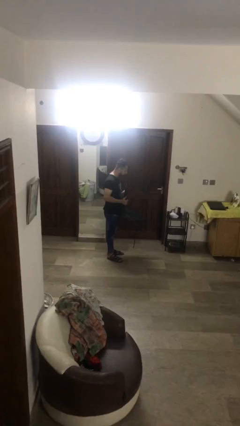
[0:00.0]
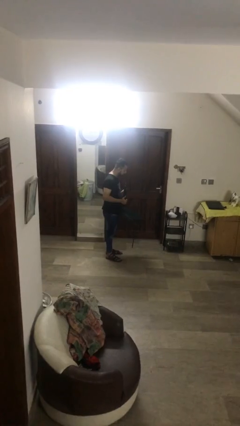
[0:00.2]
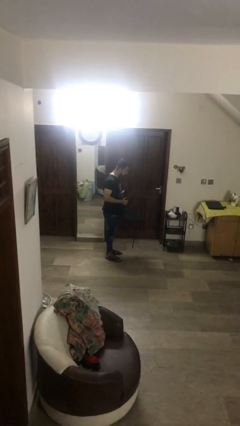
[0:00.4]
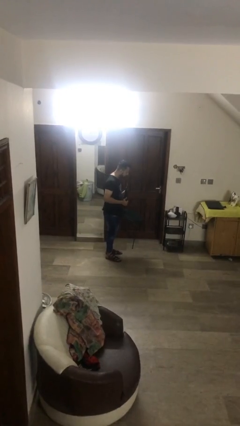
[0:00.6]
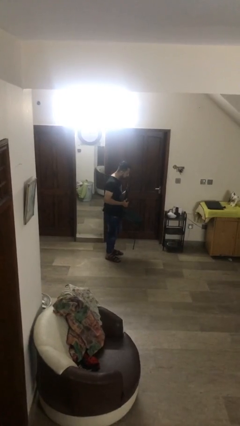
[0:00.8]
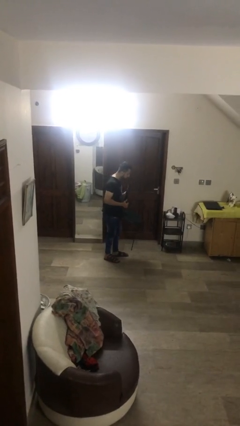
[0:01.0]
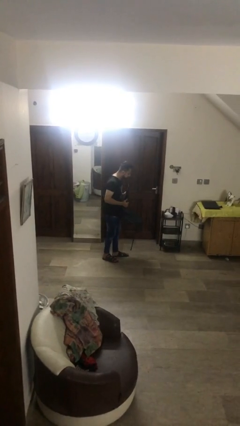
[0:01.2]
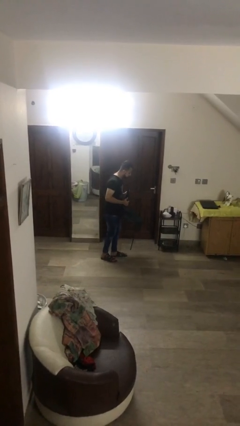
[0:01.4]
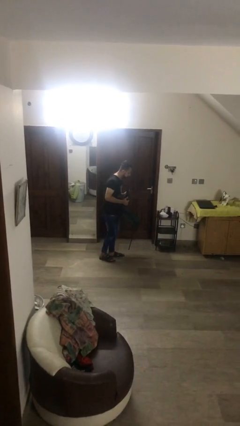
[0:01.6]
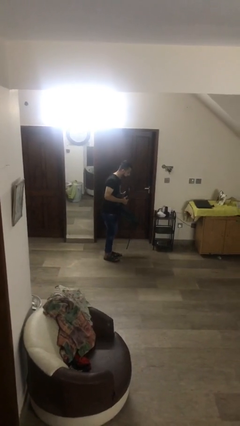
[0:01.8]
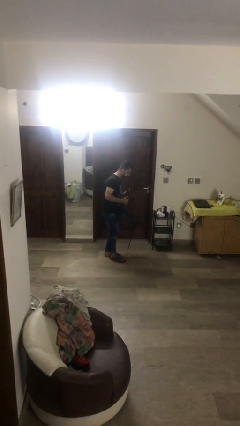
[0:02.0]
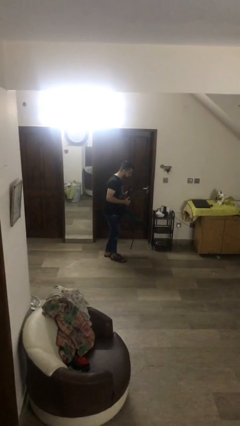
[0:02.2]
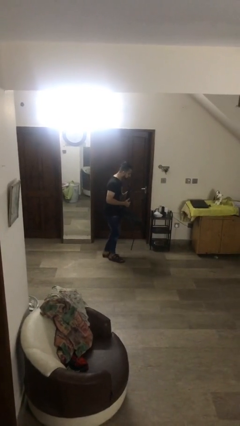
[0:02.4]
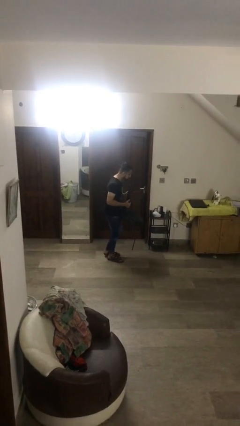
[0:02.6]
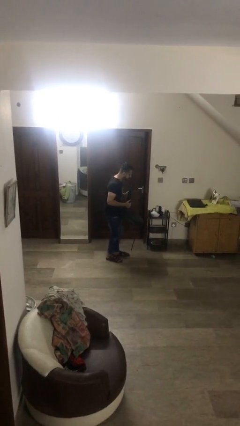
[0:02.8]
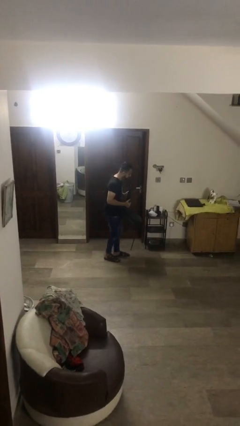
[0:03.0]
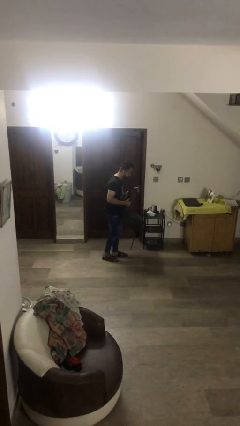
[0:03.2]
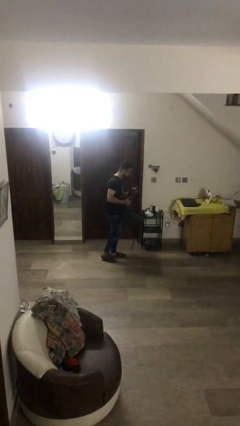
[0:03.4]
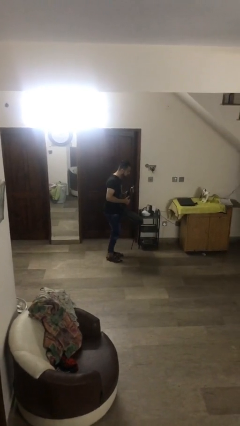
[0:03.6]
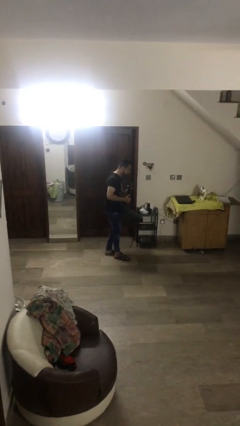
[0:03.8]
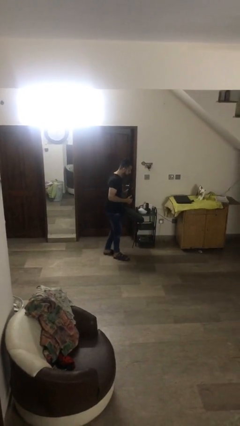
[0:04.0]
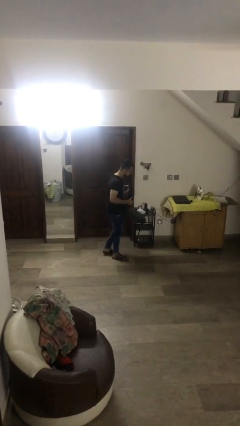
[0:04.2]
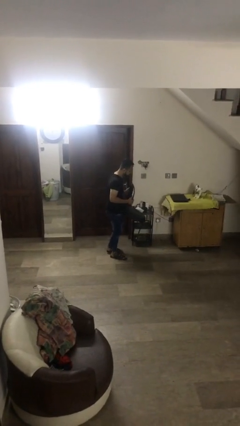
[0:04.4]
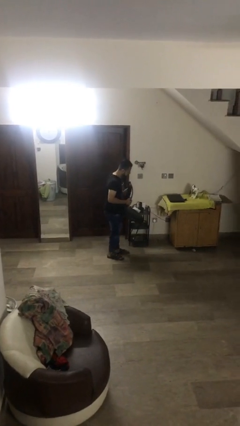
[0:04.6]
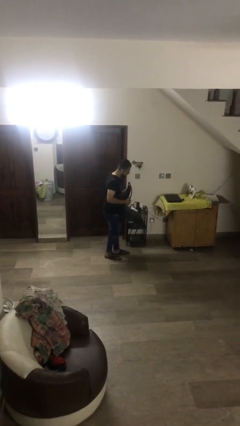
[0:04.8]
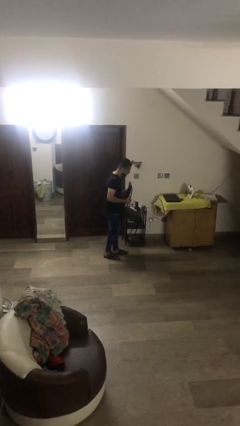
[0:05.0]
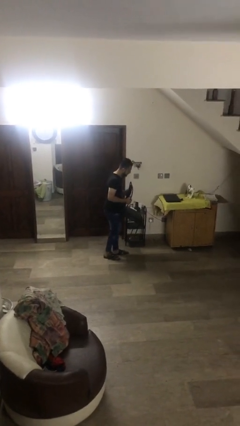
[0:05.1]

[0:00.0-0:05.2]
person carries heavy object

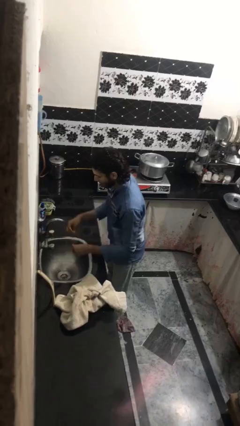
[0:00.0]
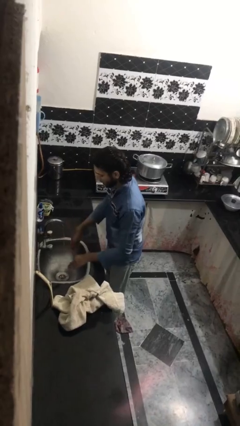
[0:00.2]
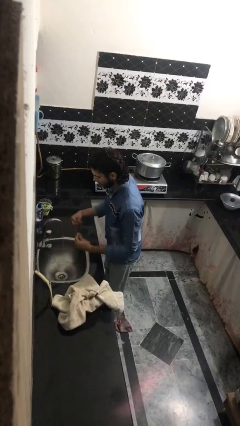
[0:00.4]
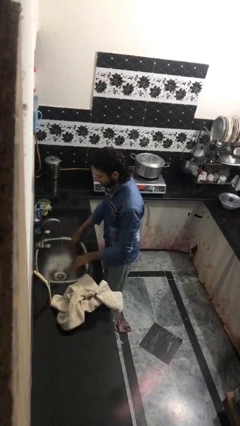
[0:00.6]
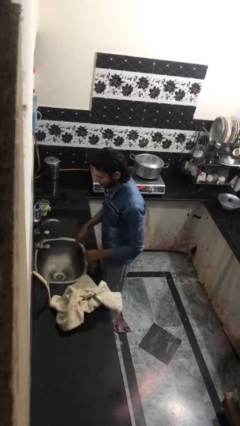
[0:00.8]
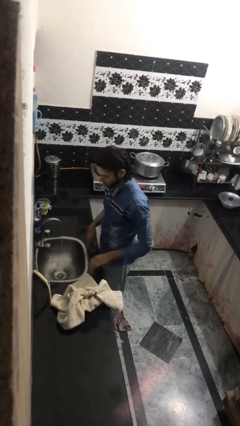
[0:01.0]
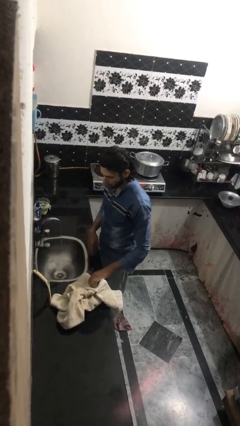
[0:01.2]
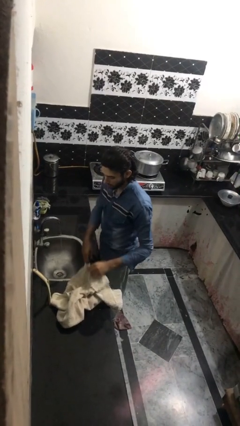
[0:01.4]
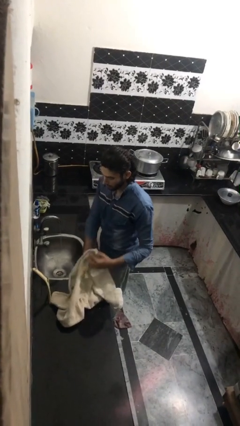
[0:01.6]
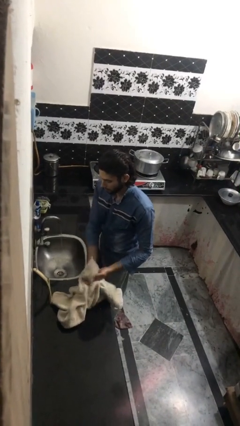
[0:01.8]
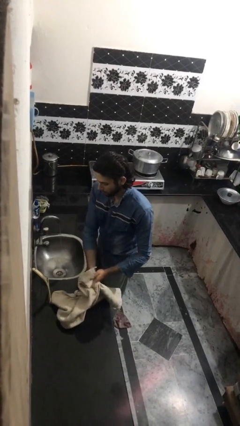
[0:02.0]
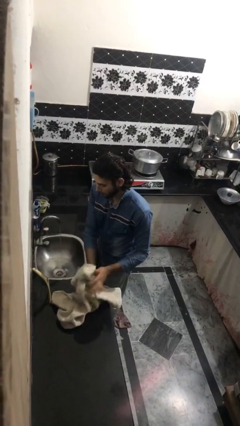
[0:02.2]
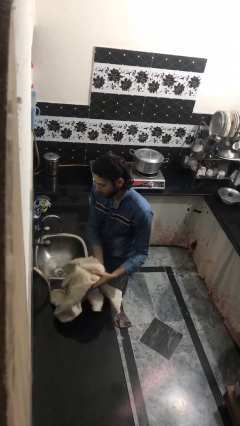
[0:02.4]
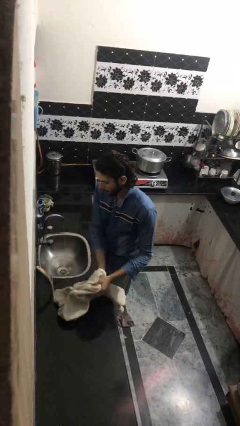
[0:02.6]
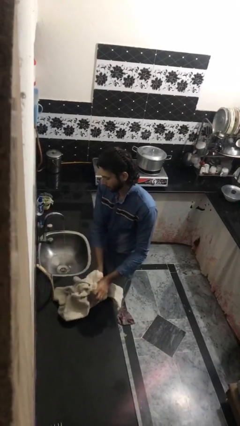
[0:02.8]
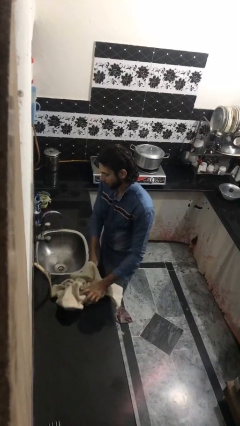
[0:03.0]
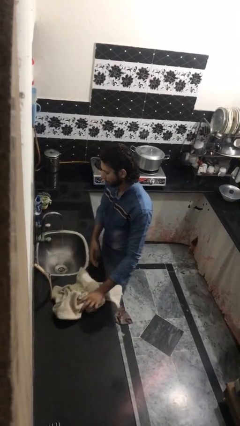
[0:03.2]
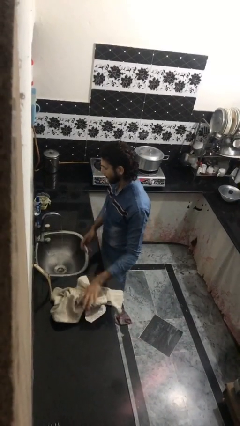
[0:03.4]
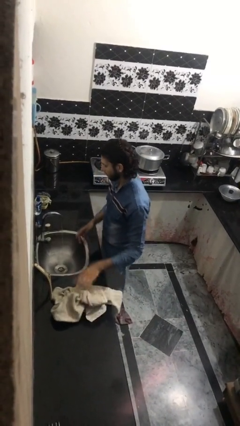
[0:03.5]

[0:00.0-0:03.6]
person dries hands with towel

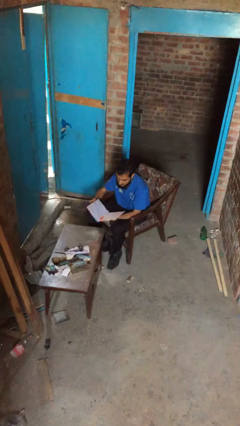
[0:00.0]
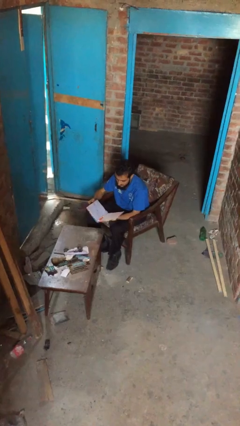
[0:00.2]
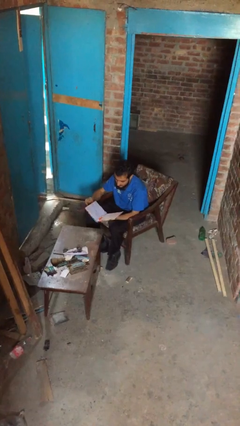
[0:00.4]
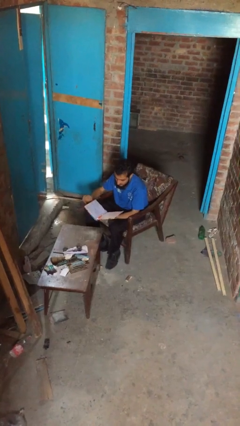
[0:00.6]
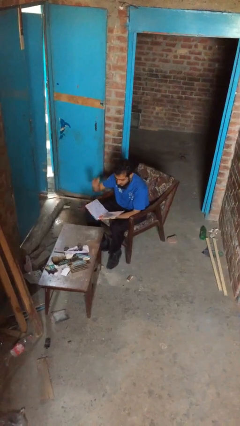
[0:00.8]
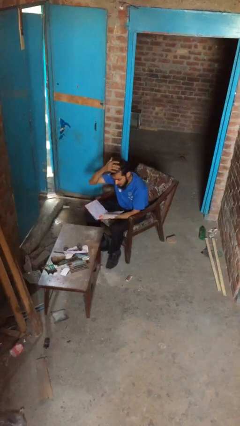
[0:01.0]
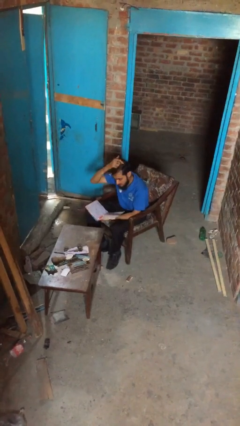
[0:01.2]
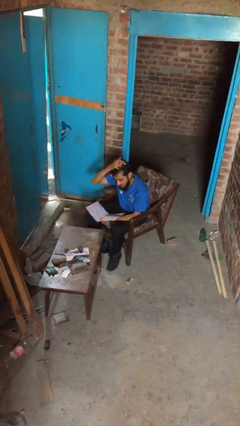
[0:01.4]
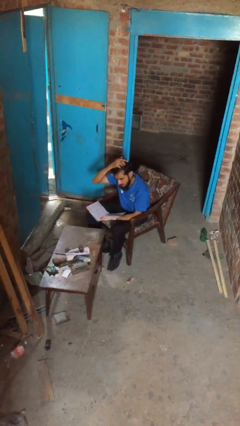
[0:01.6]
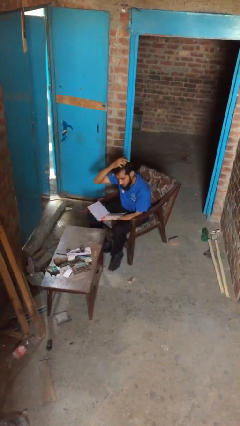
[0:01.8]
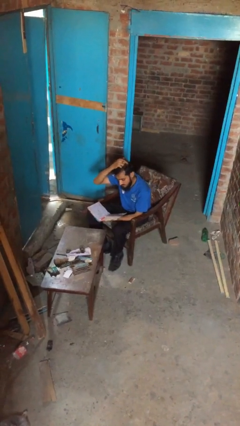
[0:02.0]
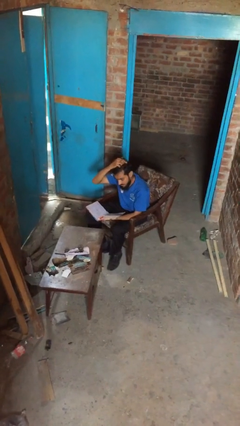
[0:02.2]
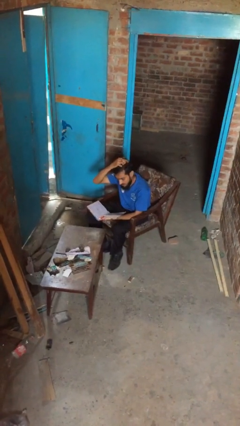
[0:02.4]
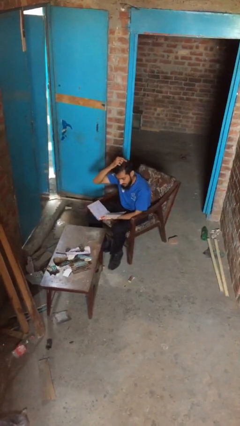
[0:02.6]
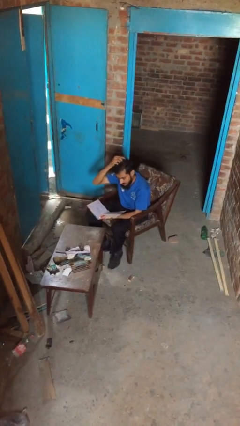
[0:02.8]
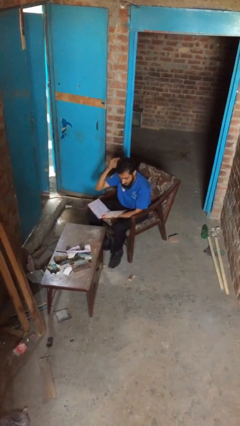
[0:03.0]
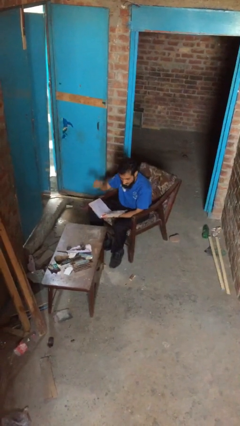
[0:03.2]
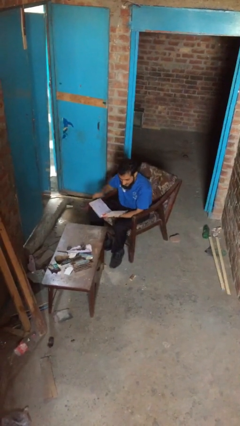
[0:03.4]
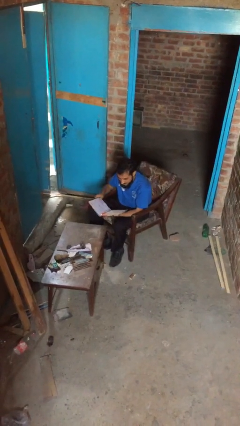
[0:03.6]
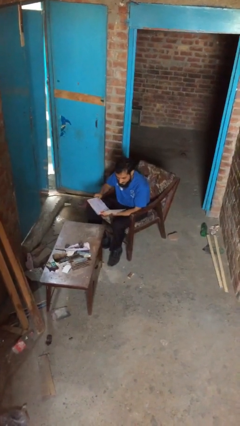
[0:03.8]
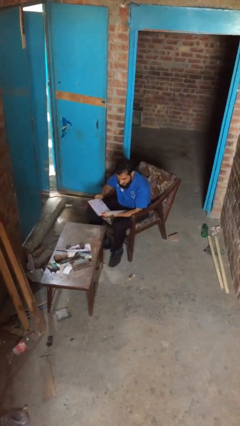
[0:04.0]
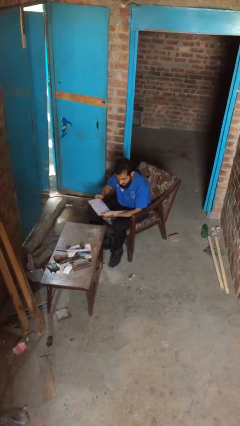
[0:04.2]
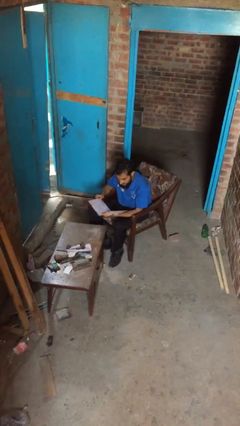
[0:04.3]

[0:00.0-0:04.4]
person reads document

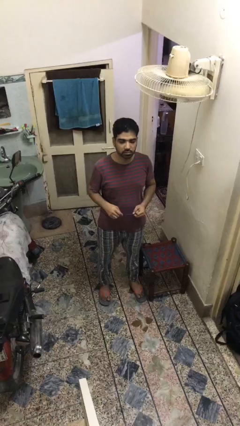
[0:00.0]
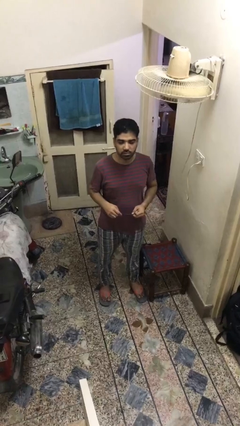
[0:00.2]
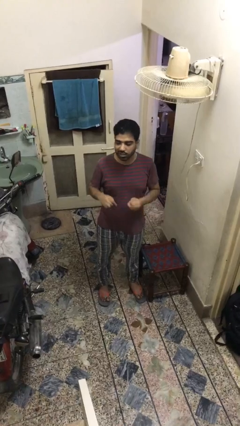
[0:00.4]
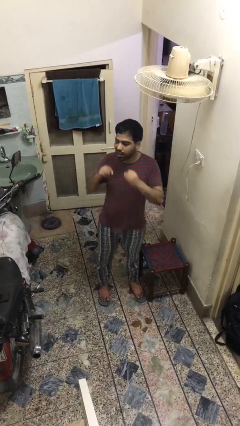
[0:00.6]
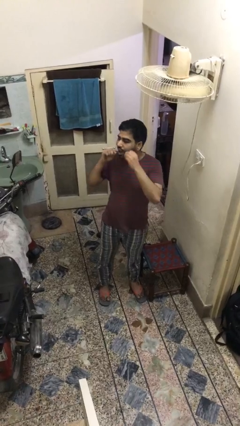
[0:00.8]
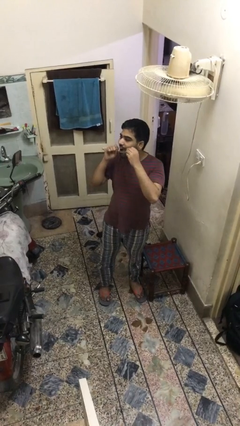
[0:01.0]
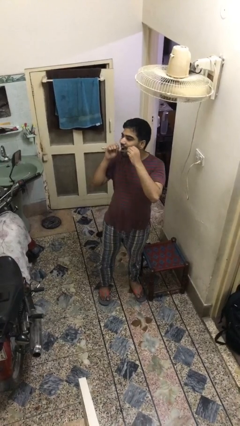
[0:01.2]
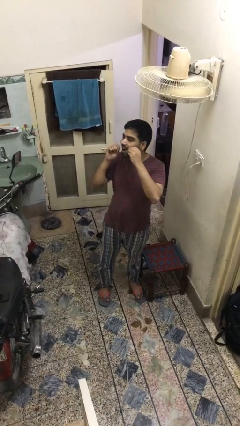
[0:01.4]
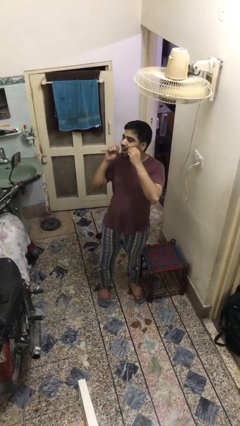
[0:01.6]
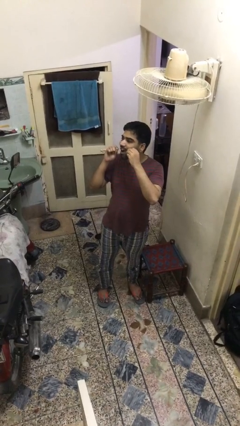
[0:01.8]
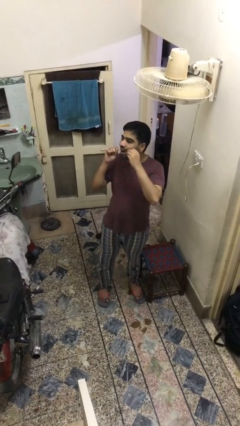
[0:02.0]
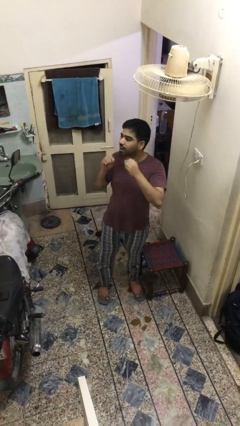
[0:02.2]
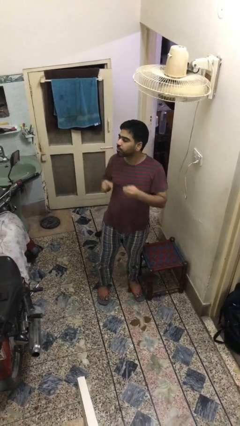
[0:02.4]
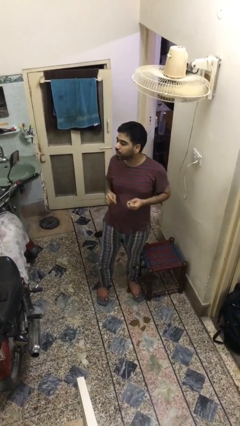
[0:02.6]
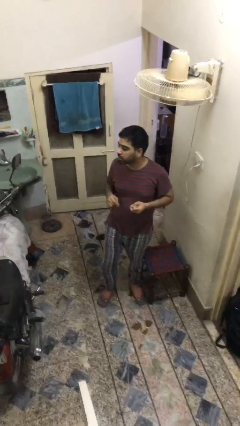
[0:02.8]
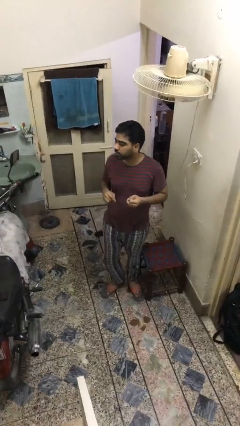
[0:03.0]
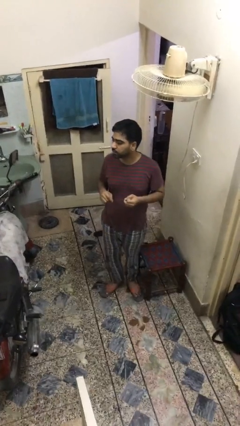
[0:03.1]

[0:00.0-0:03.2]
person flosses

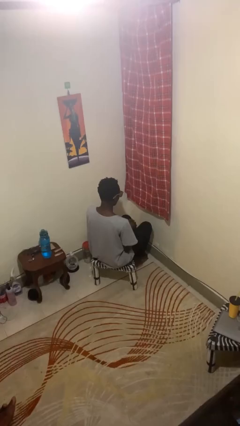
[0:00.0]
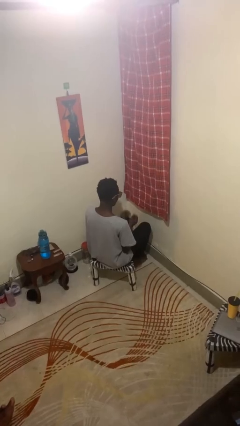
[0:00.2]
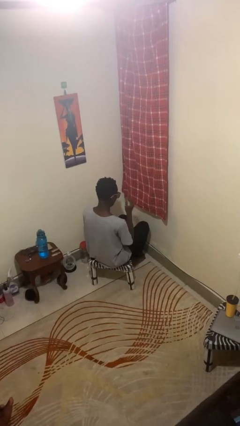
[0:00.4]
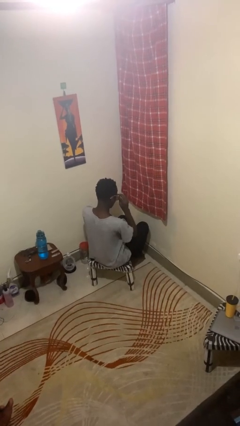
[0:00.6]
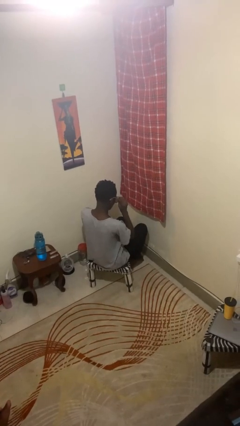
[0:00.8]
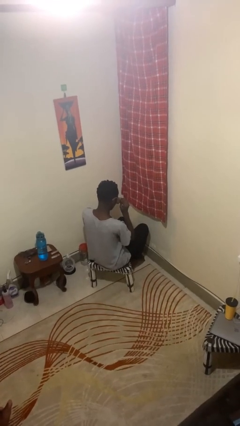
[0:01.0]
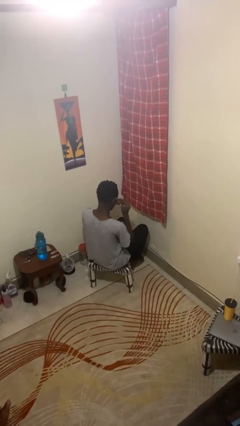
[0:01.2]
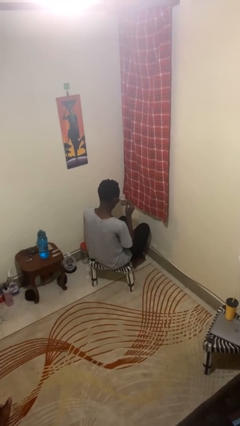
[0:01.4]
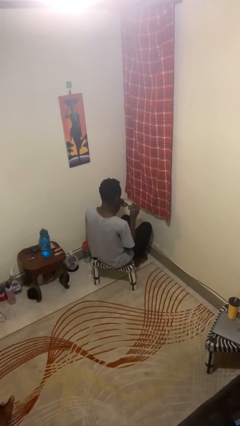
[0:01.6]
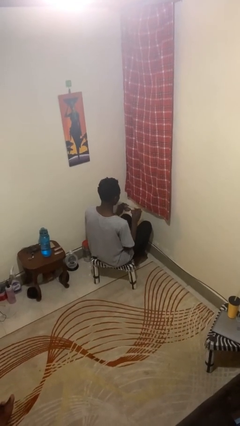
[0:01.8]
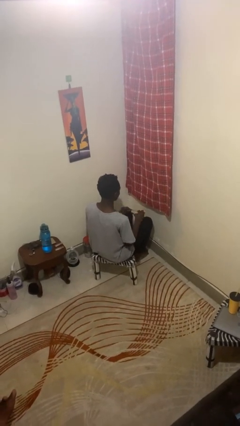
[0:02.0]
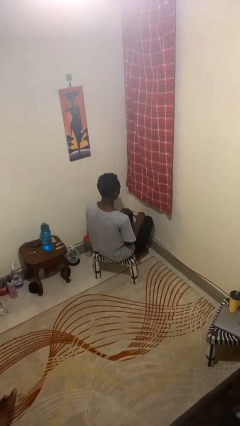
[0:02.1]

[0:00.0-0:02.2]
person takes off glasses
